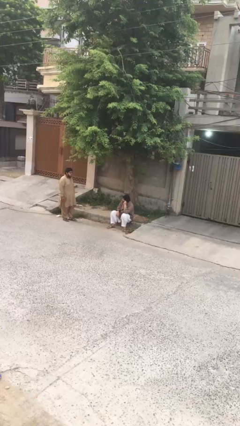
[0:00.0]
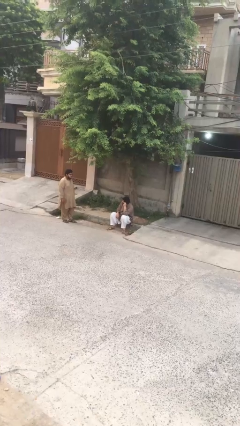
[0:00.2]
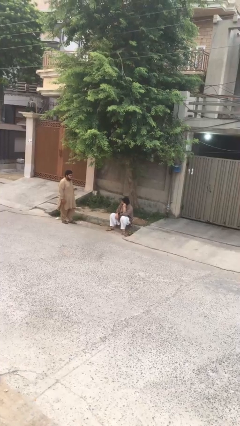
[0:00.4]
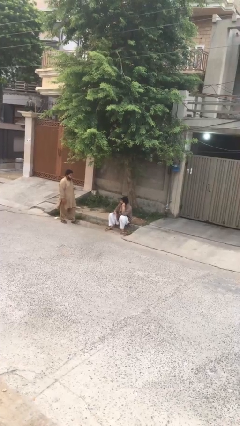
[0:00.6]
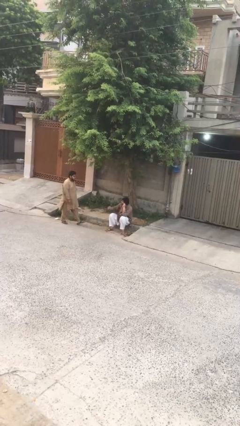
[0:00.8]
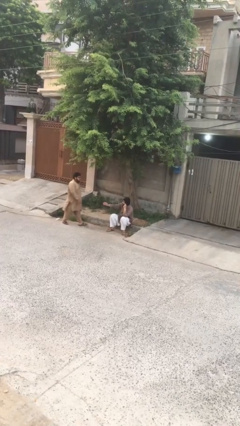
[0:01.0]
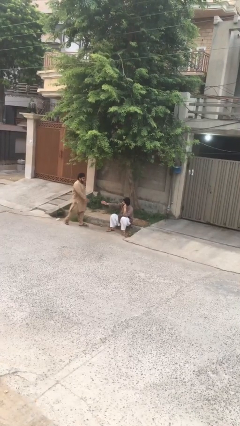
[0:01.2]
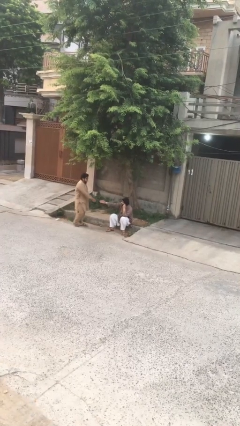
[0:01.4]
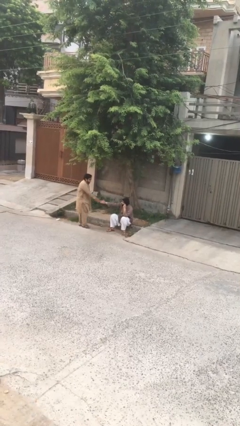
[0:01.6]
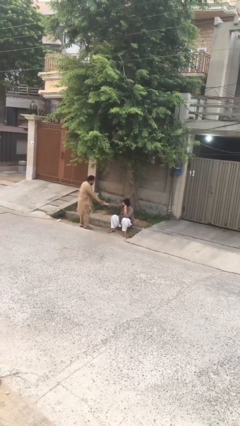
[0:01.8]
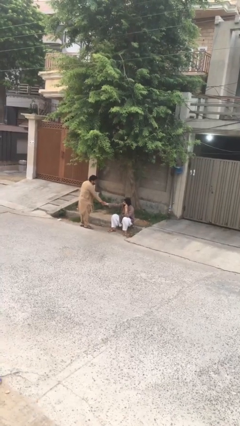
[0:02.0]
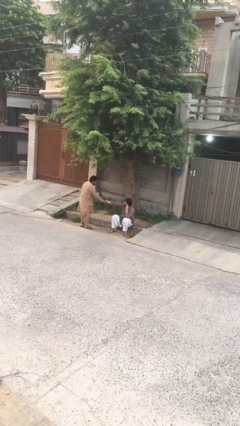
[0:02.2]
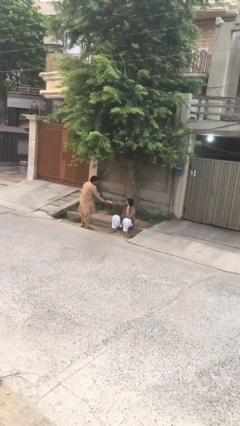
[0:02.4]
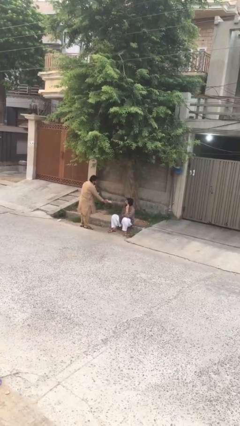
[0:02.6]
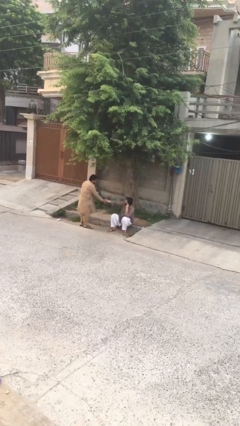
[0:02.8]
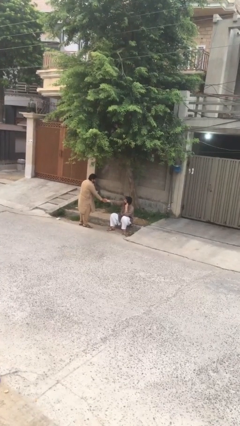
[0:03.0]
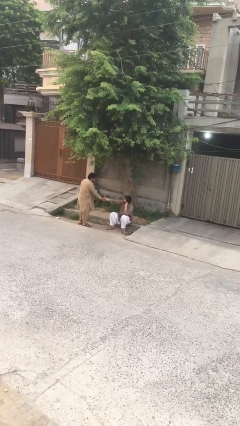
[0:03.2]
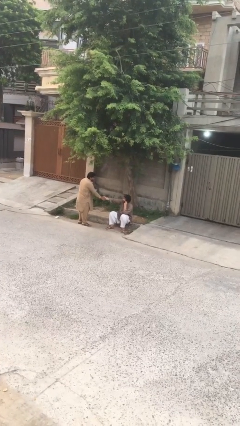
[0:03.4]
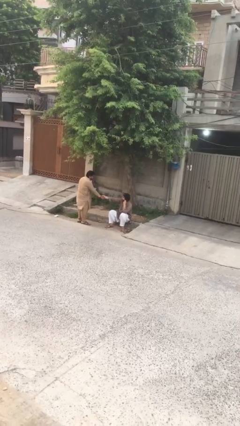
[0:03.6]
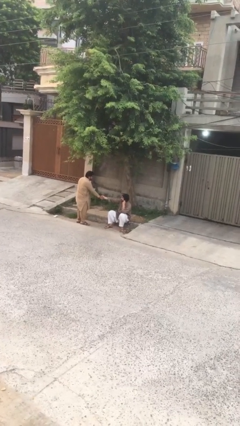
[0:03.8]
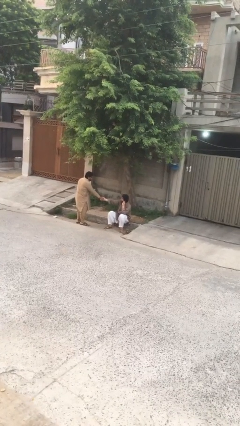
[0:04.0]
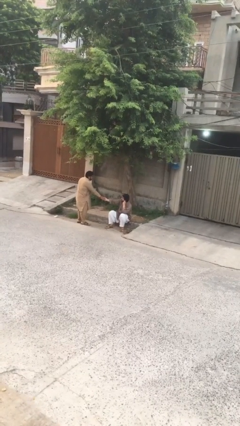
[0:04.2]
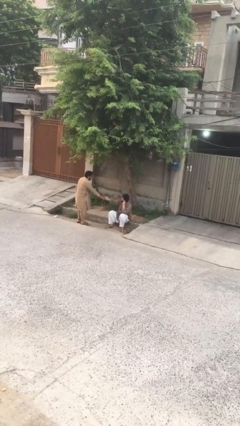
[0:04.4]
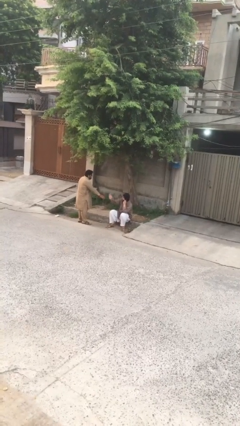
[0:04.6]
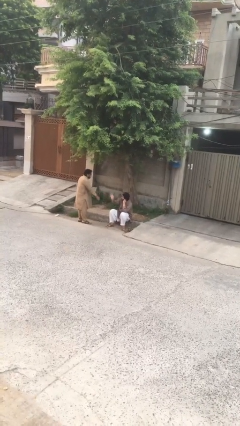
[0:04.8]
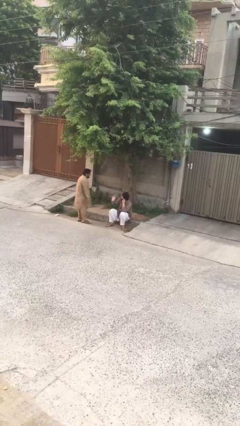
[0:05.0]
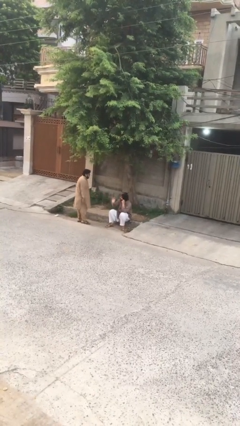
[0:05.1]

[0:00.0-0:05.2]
person shakes hand

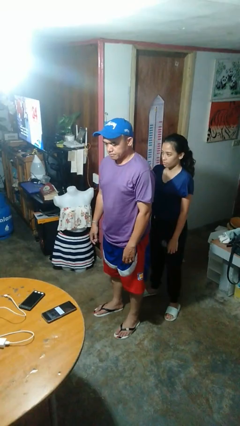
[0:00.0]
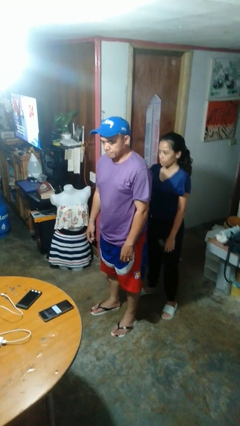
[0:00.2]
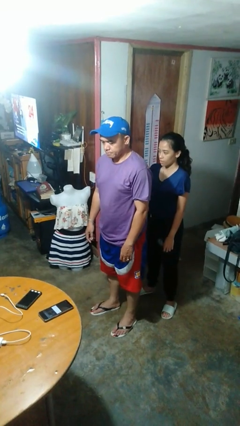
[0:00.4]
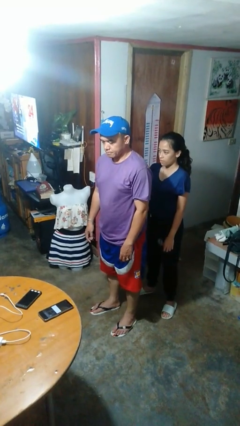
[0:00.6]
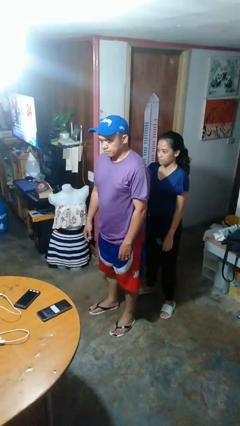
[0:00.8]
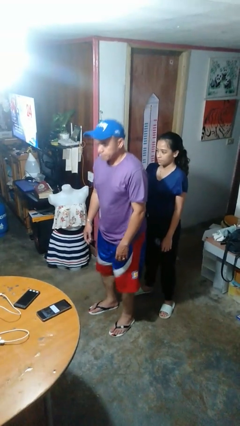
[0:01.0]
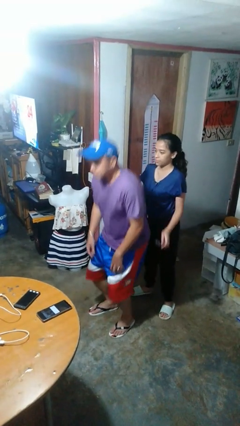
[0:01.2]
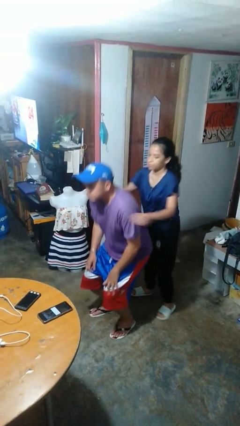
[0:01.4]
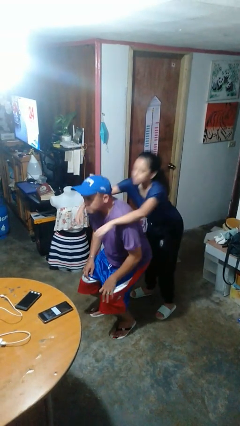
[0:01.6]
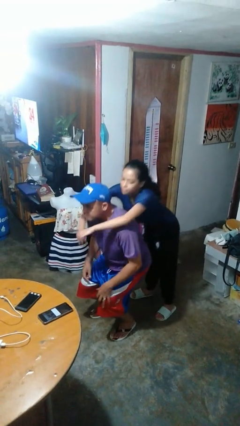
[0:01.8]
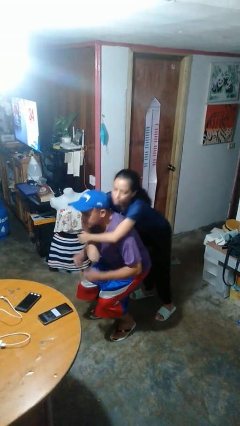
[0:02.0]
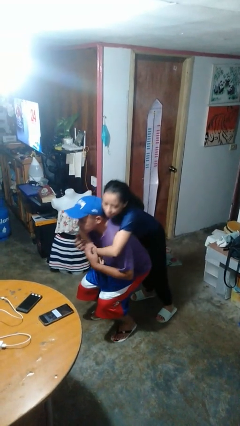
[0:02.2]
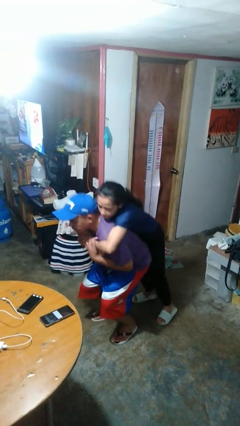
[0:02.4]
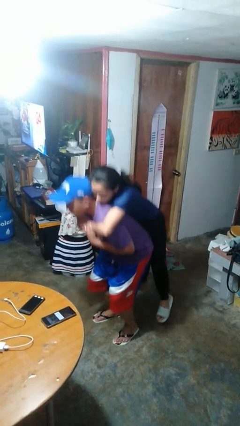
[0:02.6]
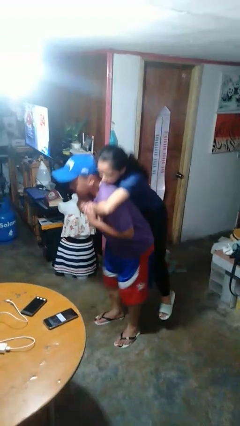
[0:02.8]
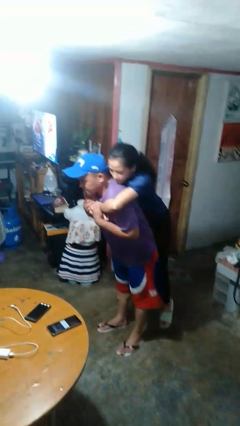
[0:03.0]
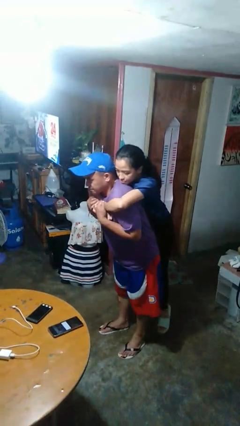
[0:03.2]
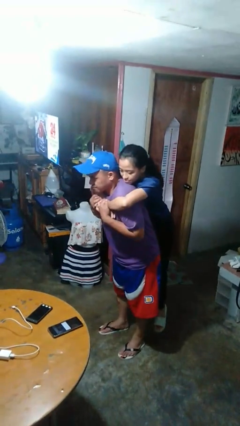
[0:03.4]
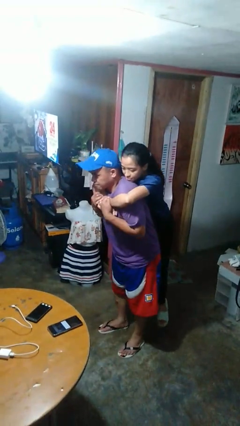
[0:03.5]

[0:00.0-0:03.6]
person picks up person

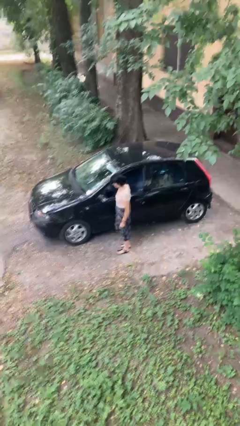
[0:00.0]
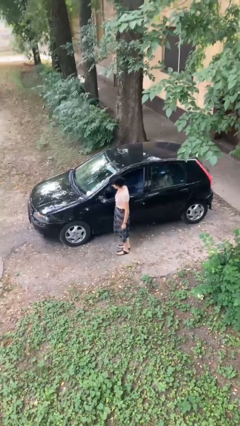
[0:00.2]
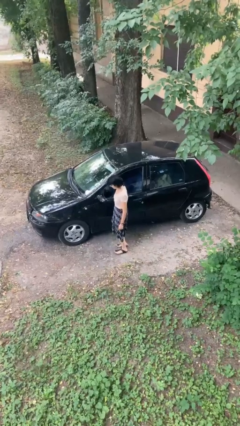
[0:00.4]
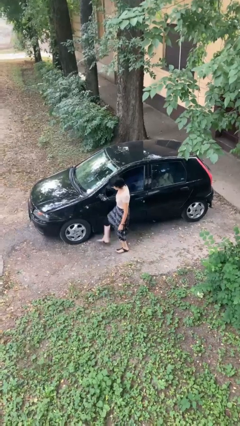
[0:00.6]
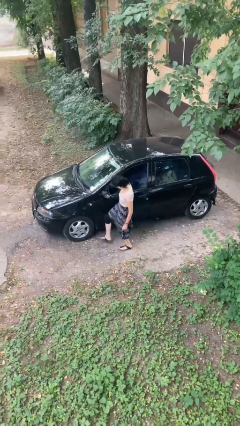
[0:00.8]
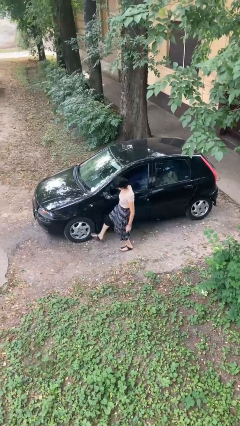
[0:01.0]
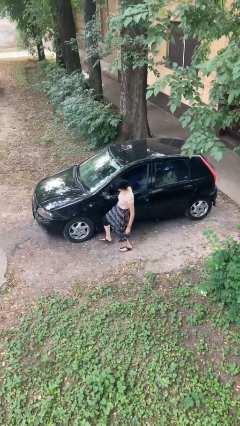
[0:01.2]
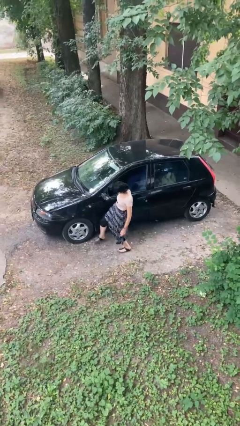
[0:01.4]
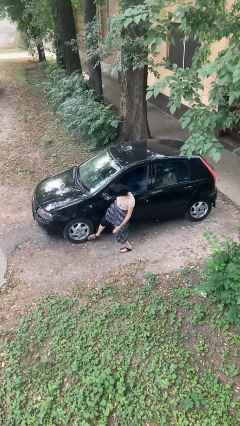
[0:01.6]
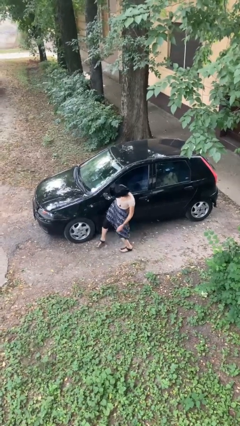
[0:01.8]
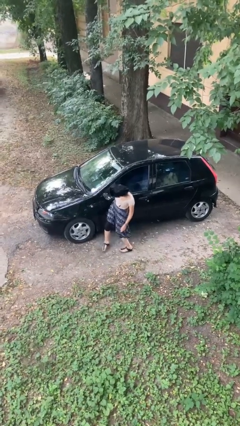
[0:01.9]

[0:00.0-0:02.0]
person kicks car tires

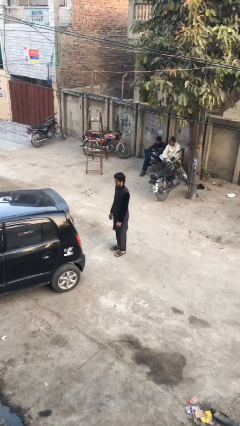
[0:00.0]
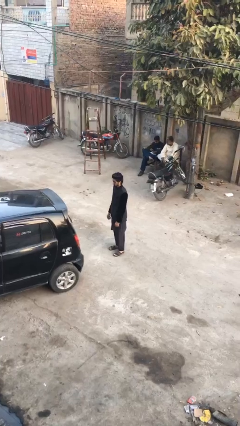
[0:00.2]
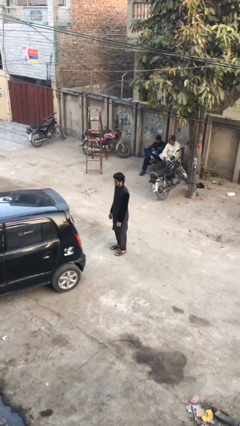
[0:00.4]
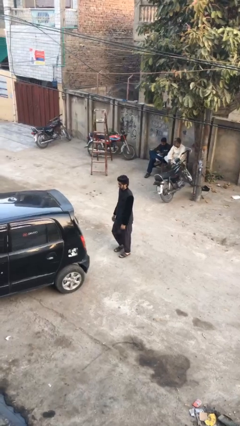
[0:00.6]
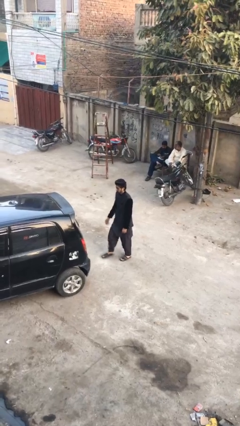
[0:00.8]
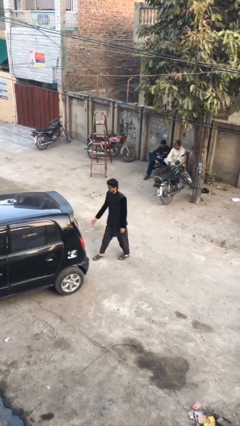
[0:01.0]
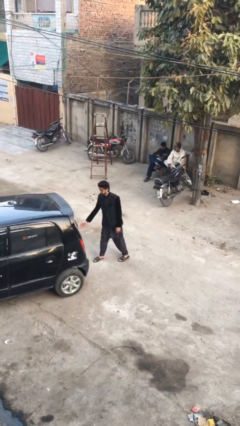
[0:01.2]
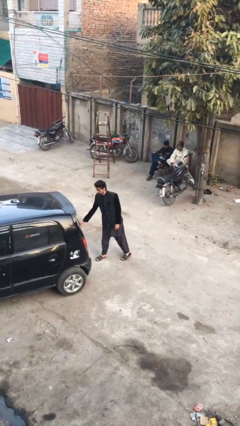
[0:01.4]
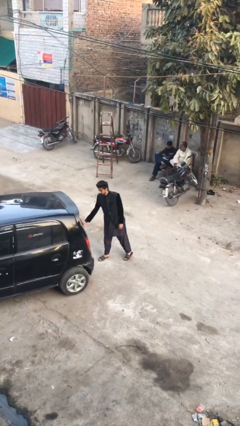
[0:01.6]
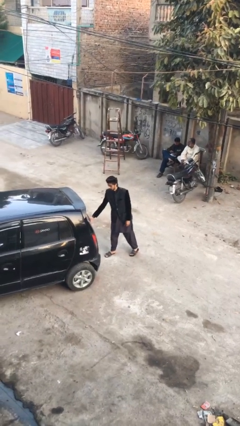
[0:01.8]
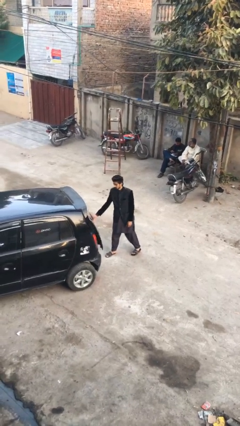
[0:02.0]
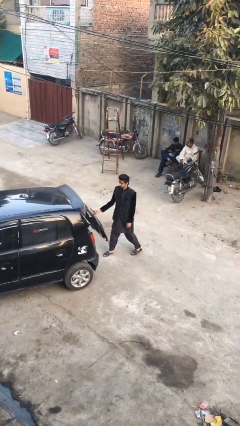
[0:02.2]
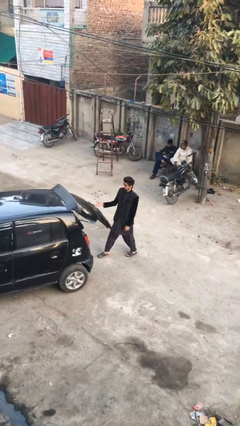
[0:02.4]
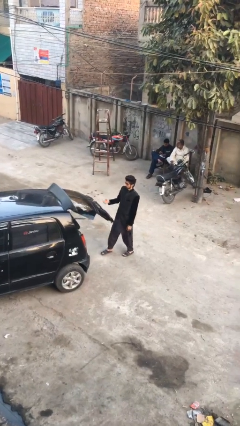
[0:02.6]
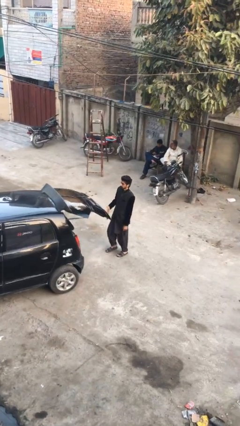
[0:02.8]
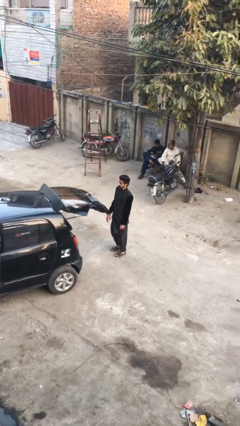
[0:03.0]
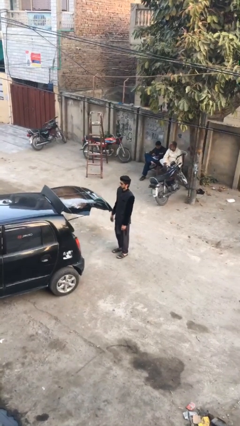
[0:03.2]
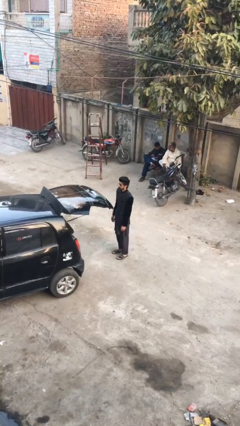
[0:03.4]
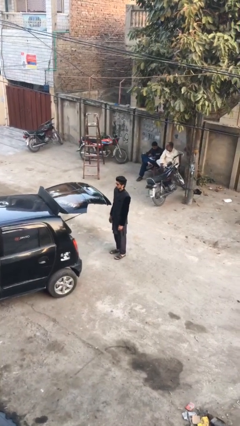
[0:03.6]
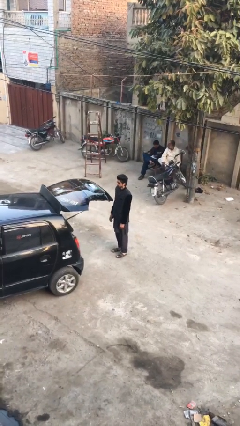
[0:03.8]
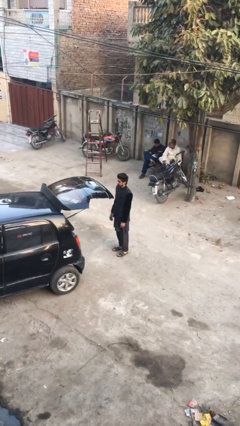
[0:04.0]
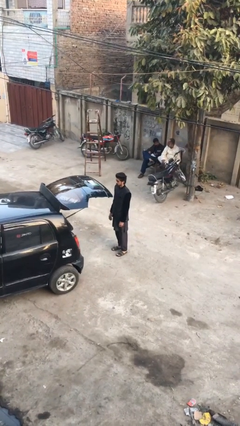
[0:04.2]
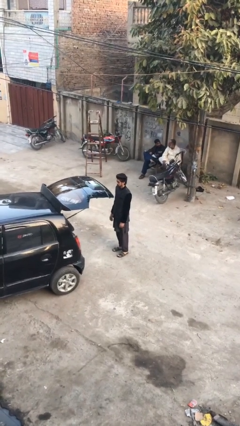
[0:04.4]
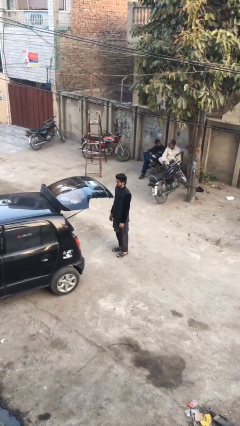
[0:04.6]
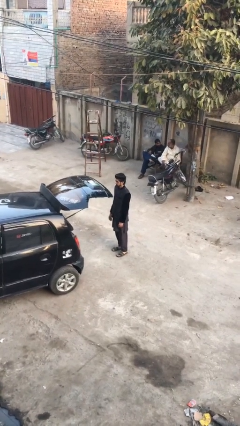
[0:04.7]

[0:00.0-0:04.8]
person opens car trunk

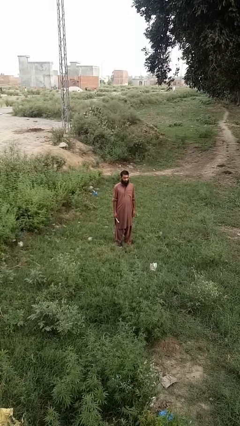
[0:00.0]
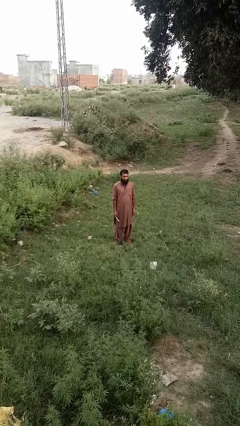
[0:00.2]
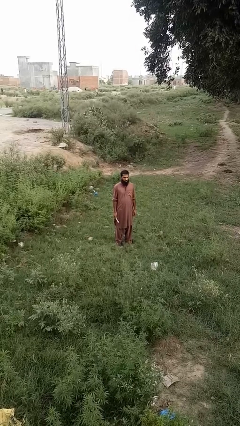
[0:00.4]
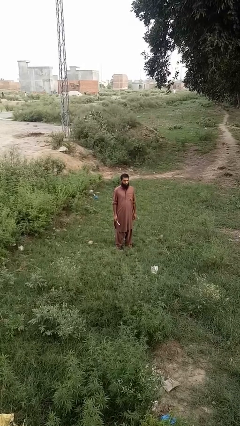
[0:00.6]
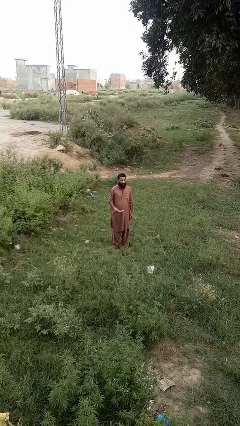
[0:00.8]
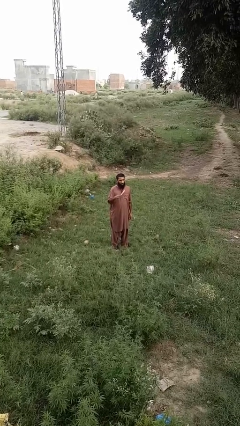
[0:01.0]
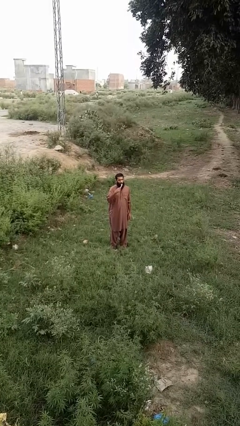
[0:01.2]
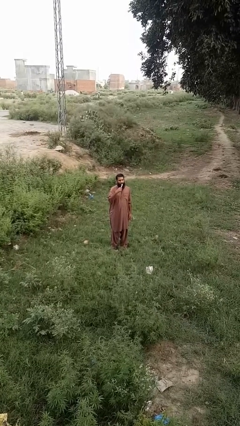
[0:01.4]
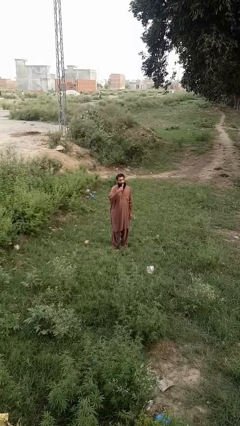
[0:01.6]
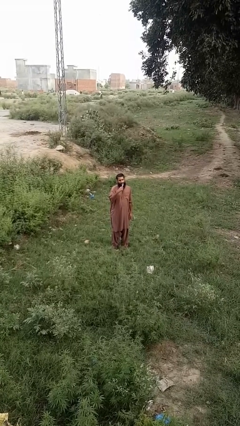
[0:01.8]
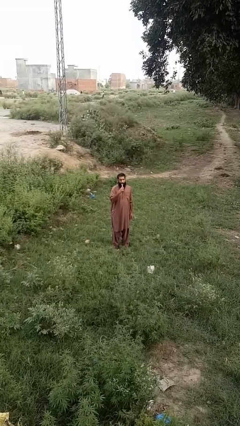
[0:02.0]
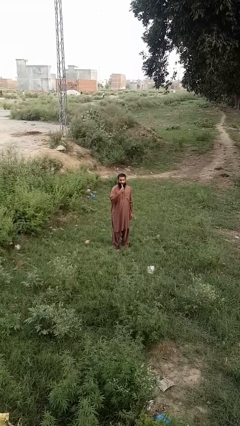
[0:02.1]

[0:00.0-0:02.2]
person brushes teeth
